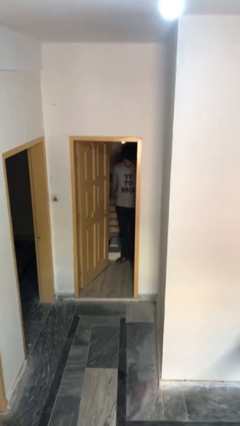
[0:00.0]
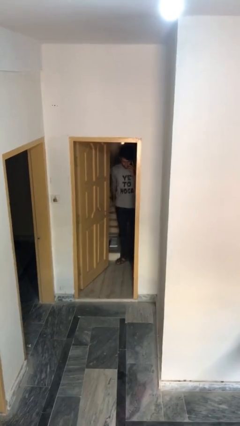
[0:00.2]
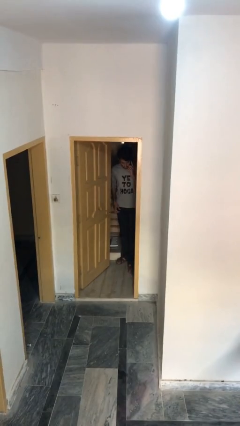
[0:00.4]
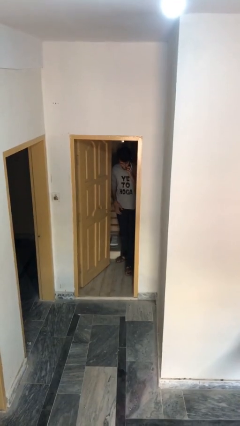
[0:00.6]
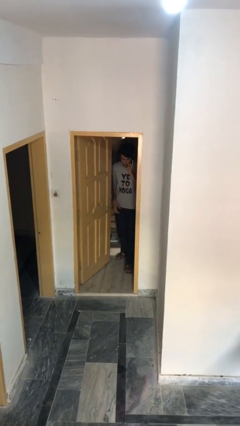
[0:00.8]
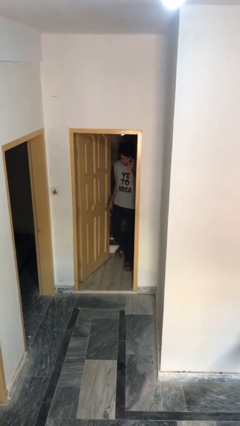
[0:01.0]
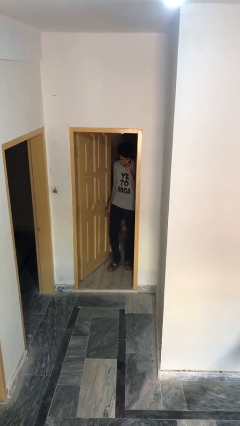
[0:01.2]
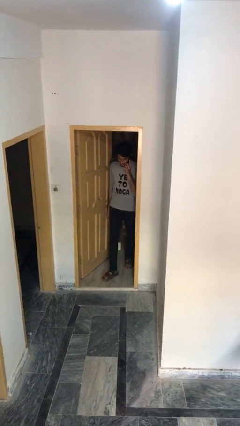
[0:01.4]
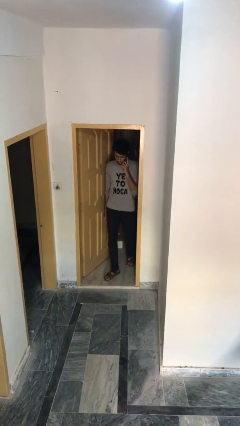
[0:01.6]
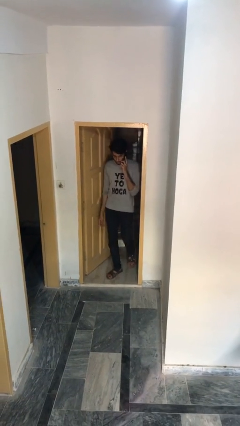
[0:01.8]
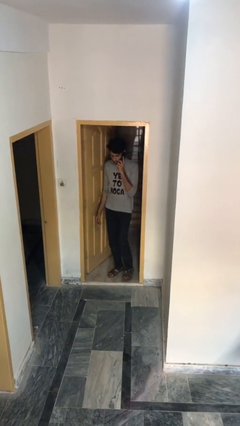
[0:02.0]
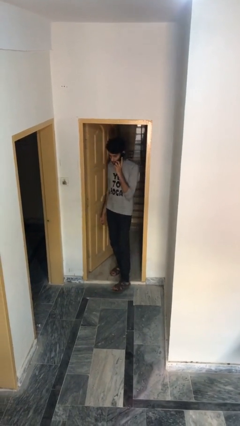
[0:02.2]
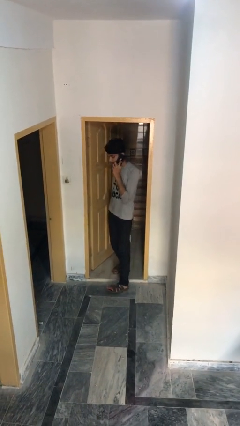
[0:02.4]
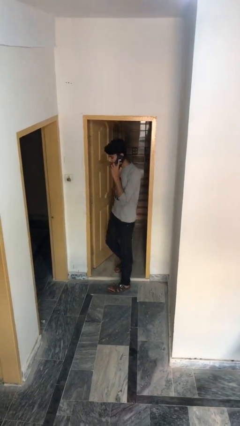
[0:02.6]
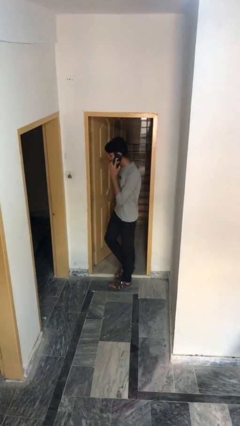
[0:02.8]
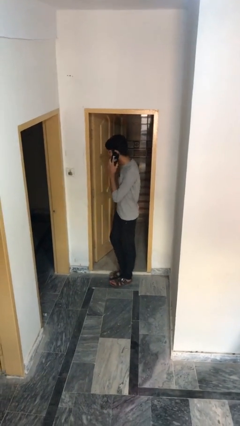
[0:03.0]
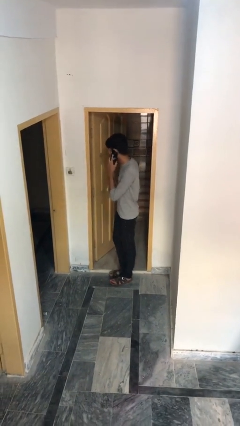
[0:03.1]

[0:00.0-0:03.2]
person enters scene through structure

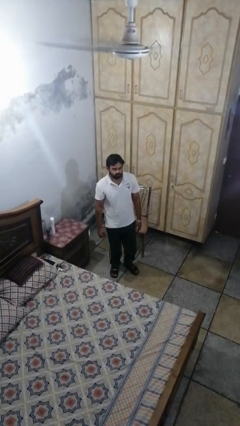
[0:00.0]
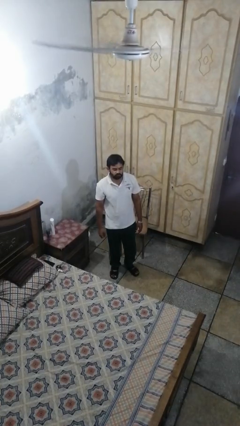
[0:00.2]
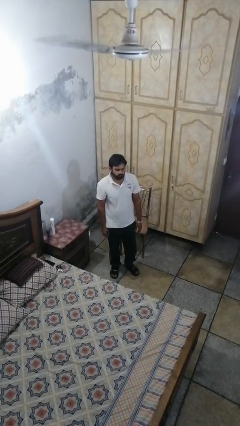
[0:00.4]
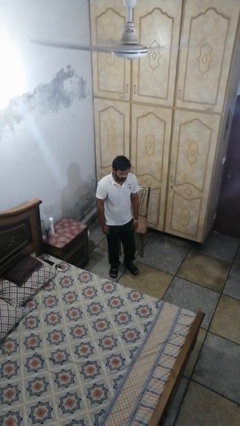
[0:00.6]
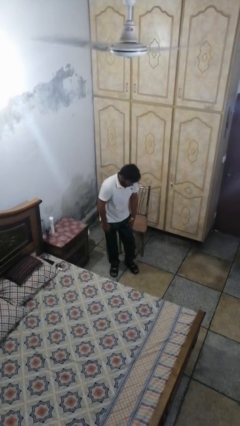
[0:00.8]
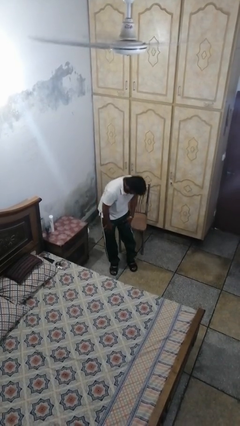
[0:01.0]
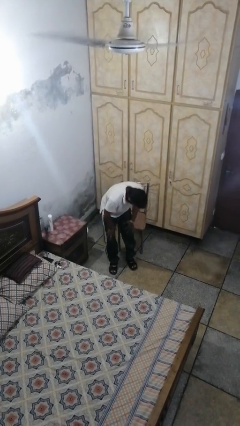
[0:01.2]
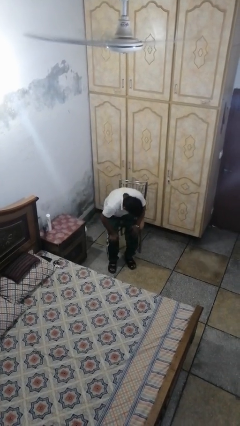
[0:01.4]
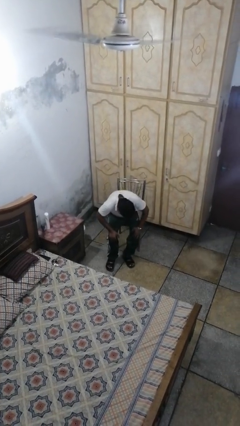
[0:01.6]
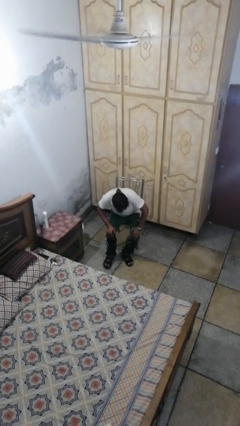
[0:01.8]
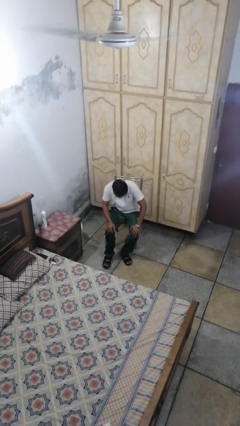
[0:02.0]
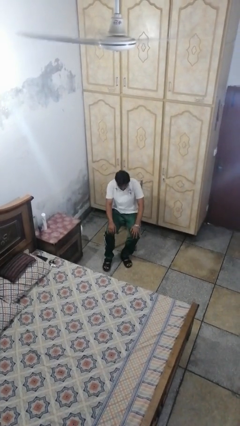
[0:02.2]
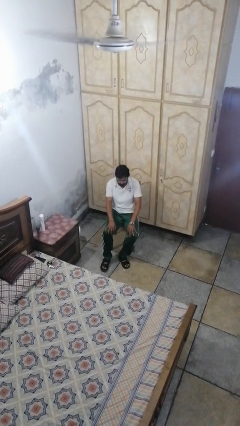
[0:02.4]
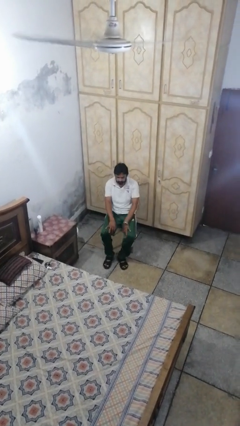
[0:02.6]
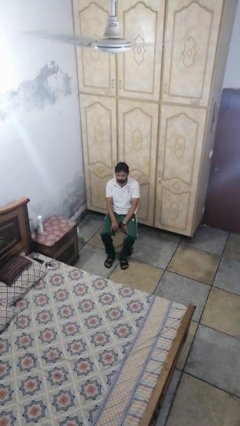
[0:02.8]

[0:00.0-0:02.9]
person sits down

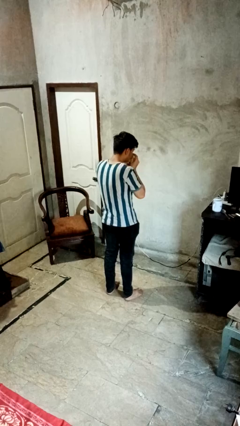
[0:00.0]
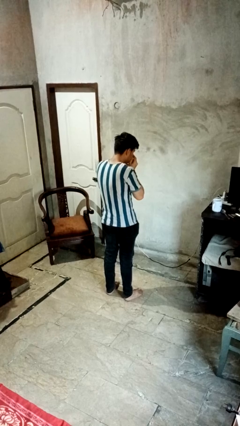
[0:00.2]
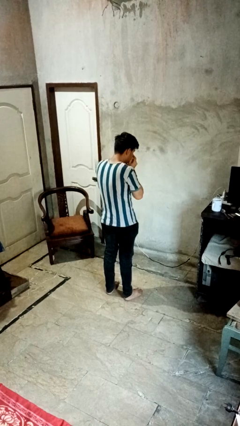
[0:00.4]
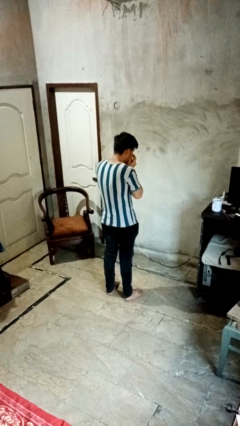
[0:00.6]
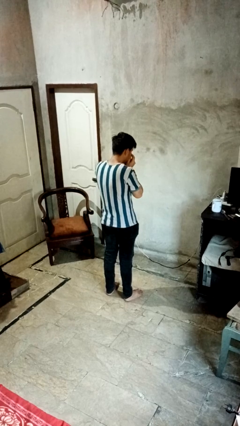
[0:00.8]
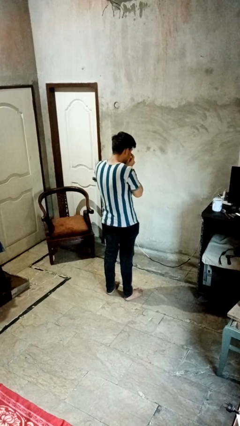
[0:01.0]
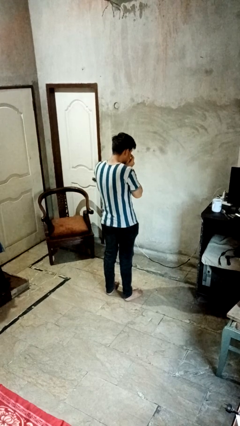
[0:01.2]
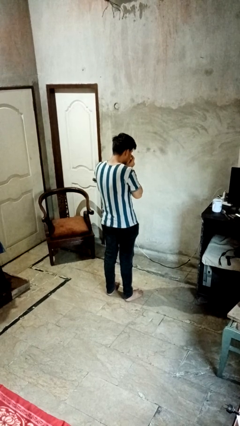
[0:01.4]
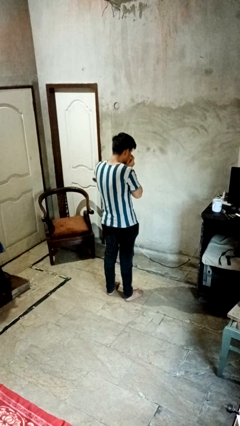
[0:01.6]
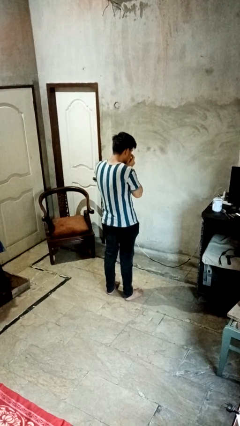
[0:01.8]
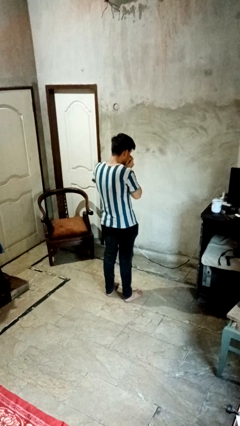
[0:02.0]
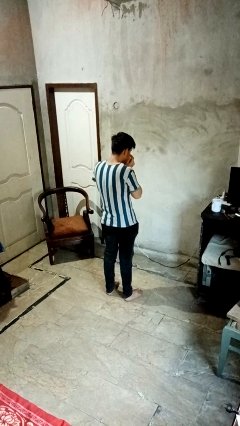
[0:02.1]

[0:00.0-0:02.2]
person blows nose

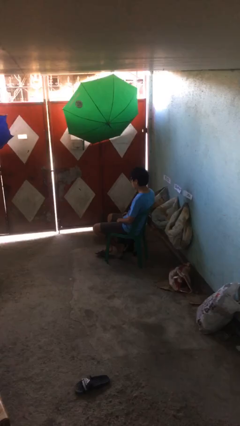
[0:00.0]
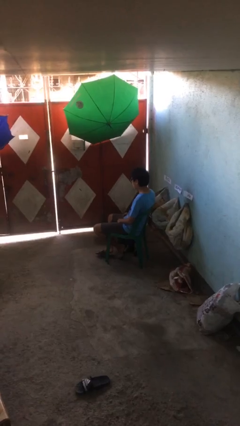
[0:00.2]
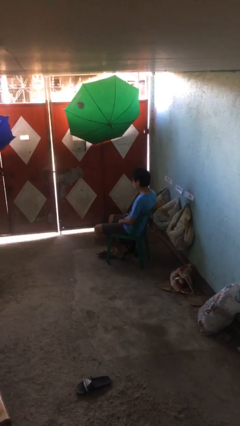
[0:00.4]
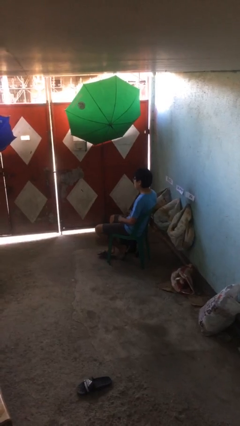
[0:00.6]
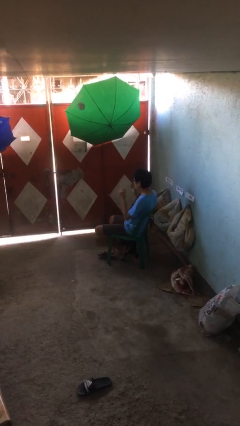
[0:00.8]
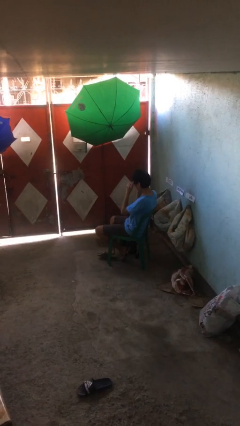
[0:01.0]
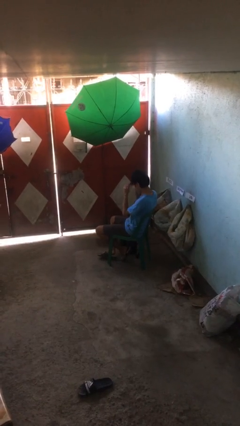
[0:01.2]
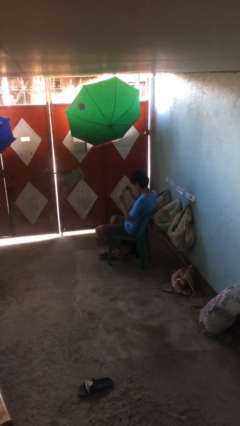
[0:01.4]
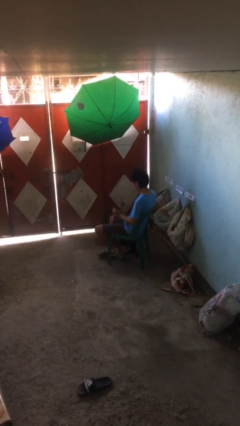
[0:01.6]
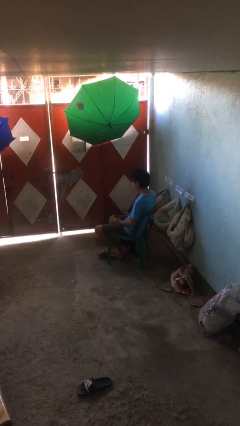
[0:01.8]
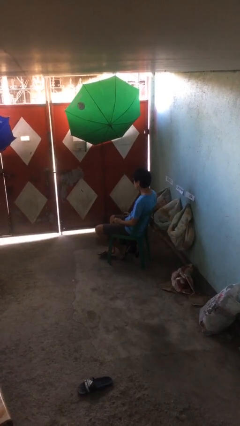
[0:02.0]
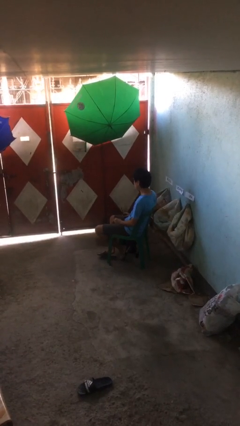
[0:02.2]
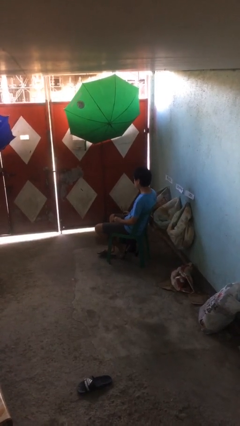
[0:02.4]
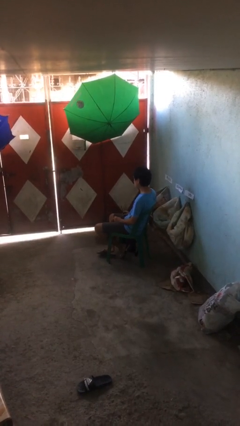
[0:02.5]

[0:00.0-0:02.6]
person takes off glasses

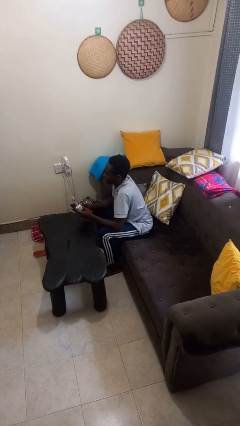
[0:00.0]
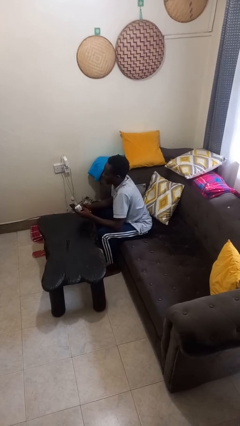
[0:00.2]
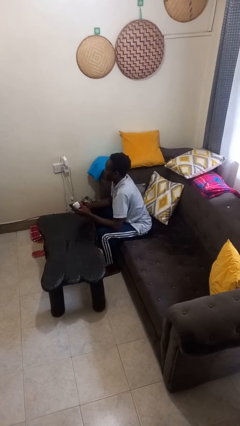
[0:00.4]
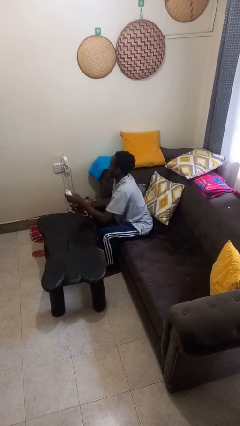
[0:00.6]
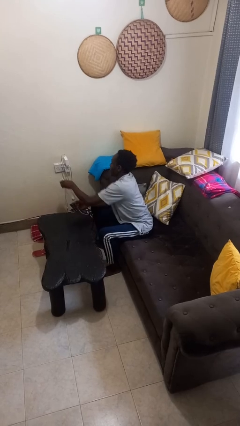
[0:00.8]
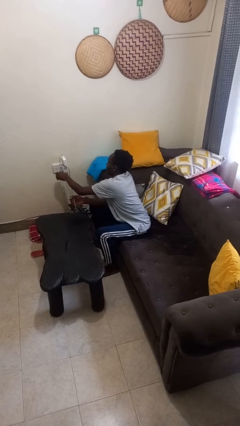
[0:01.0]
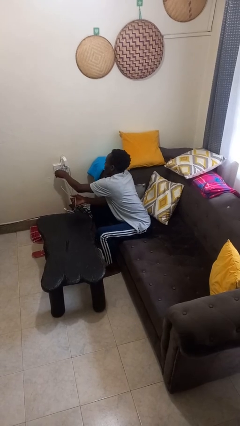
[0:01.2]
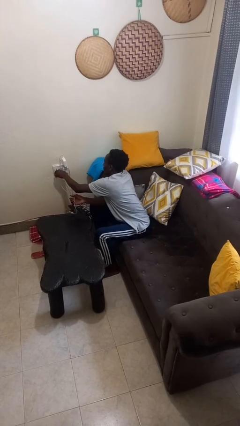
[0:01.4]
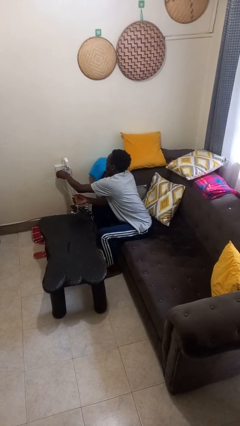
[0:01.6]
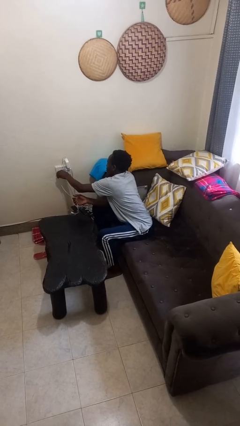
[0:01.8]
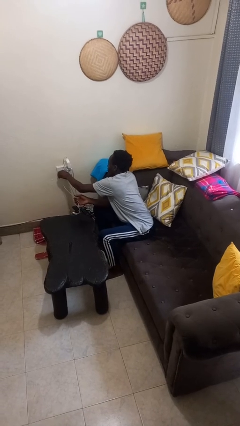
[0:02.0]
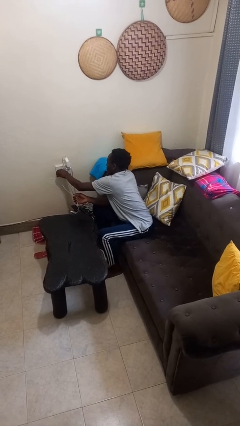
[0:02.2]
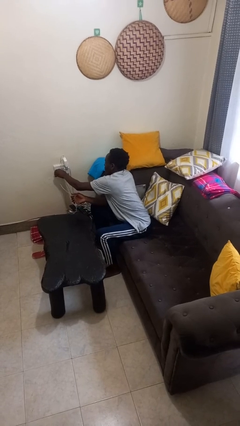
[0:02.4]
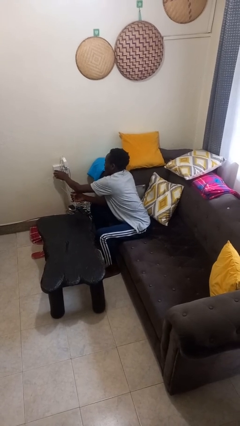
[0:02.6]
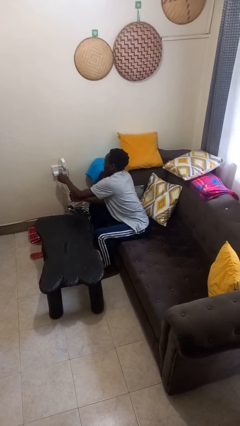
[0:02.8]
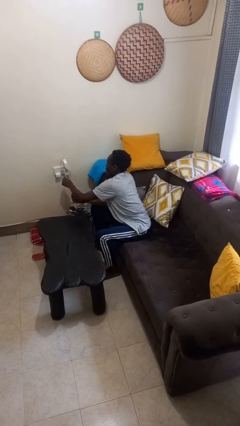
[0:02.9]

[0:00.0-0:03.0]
person plugs into electrical socket

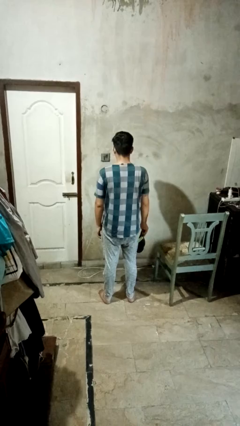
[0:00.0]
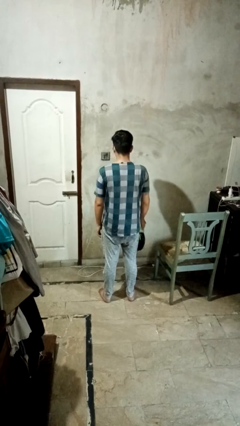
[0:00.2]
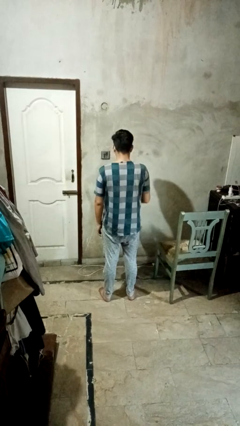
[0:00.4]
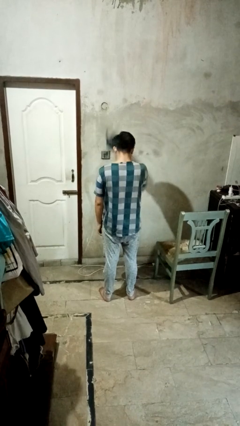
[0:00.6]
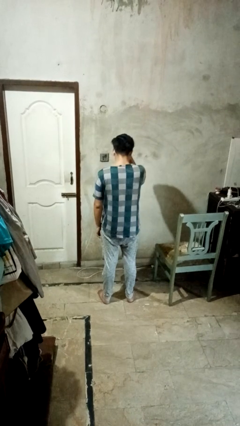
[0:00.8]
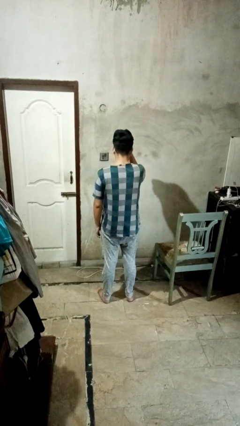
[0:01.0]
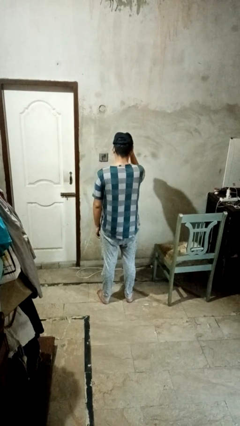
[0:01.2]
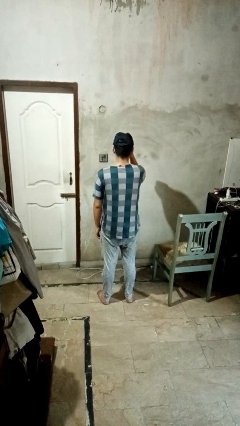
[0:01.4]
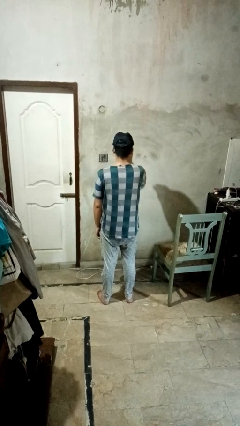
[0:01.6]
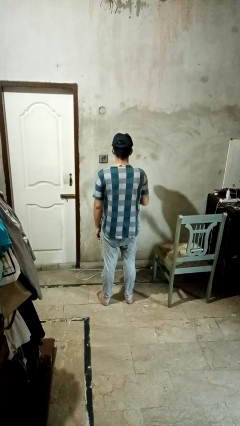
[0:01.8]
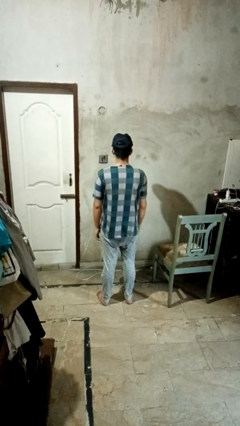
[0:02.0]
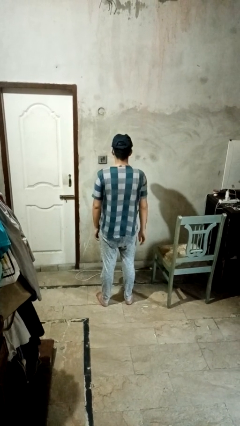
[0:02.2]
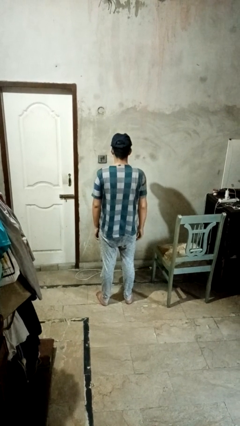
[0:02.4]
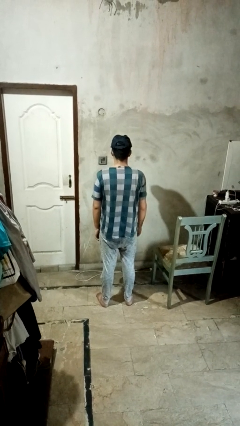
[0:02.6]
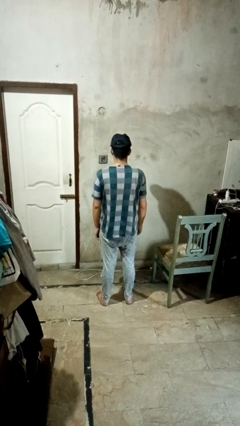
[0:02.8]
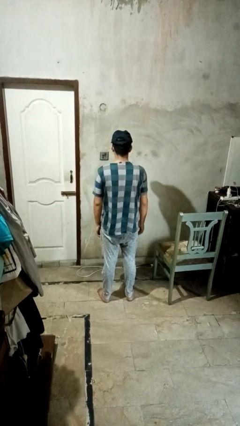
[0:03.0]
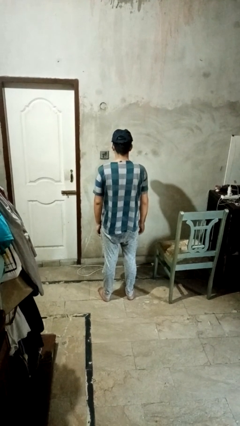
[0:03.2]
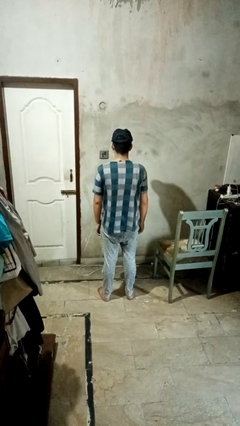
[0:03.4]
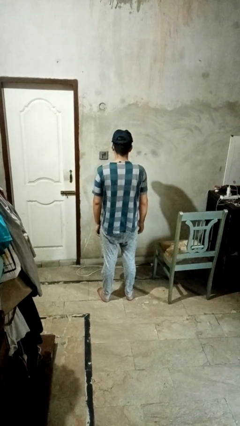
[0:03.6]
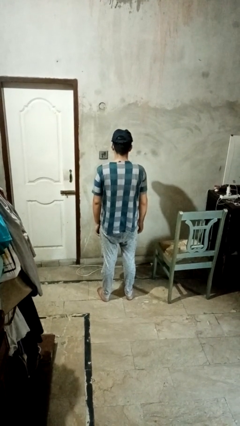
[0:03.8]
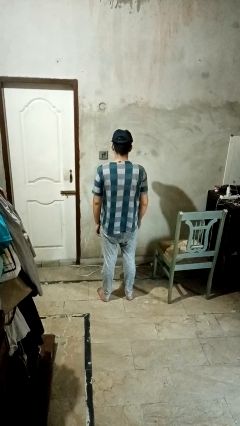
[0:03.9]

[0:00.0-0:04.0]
person puts on hat
